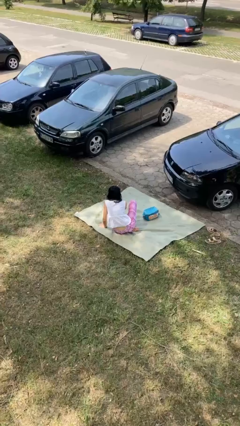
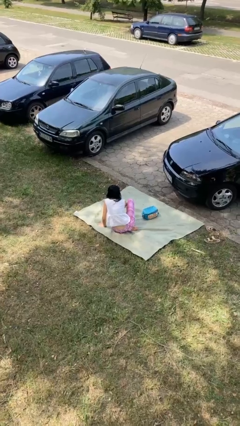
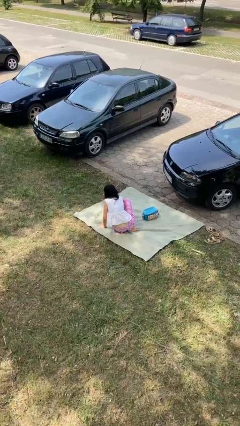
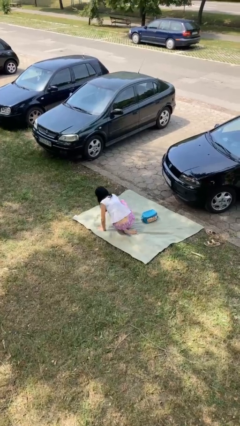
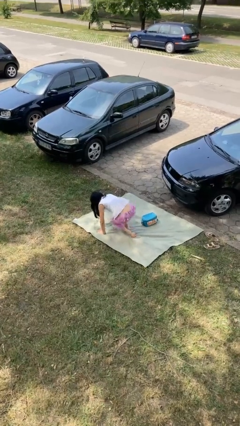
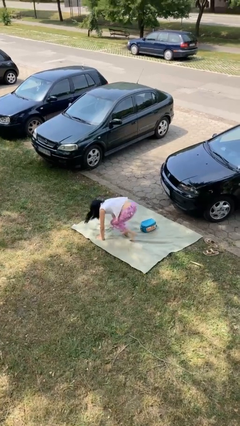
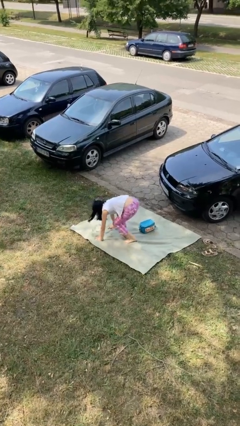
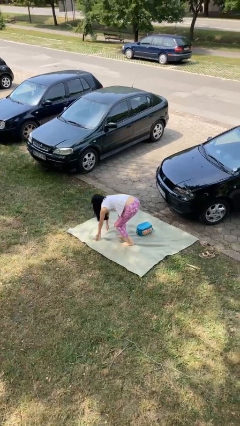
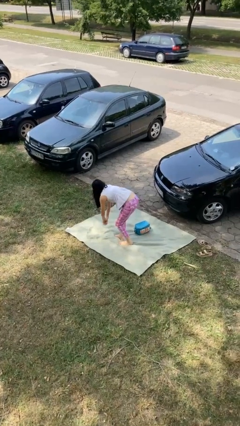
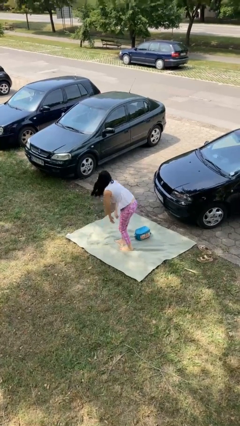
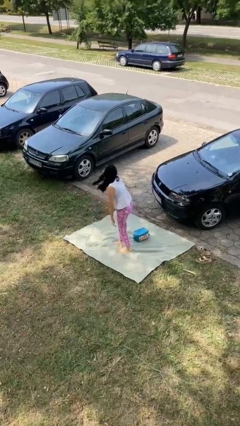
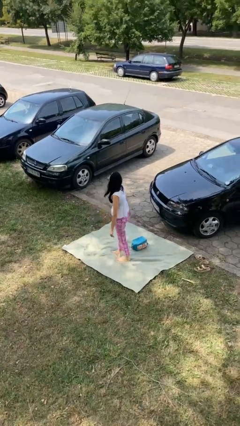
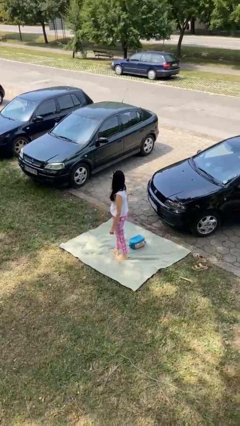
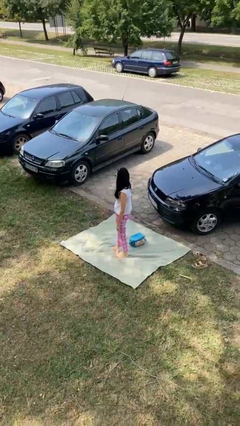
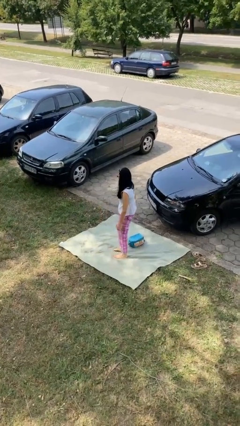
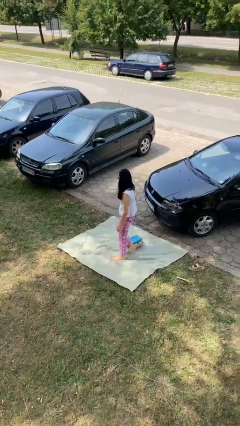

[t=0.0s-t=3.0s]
person stands up from floor

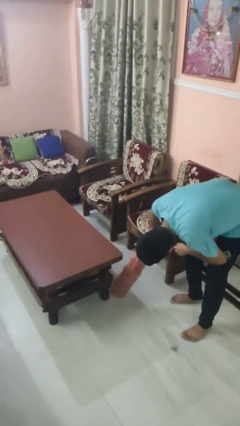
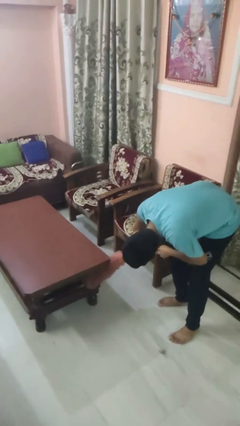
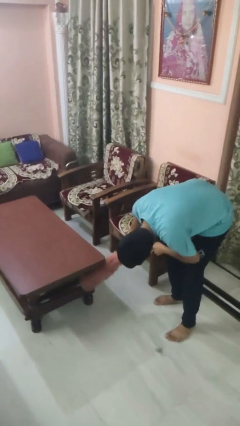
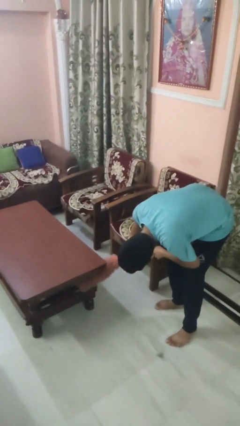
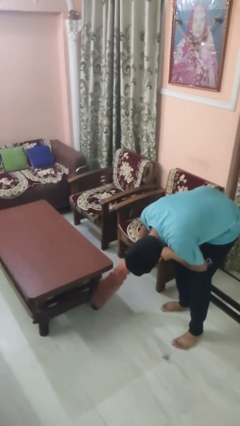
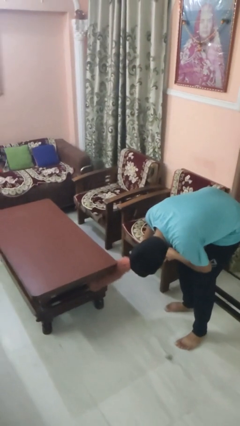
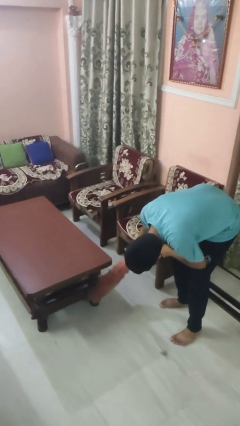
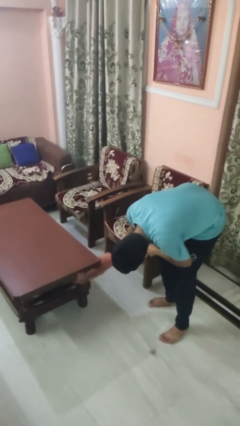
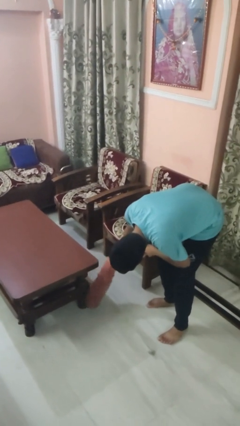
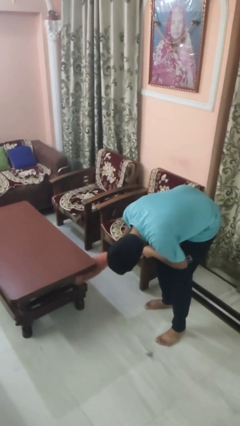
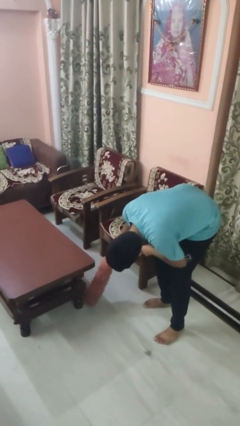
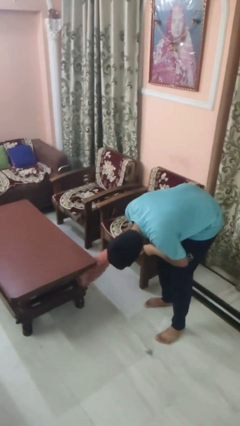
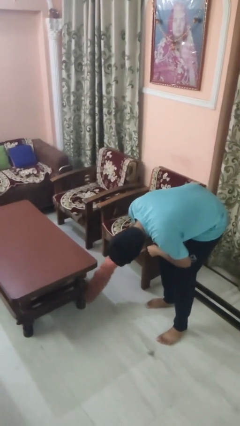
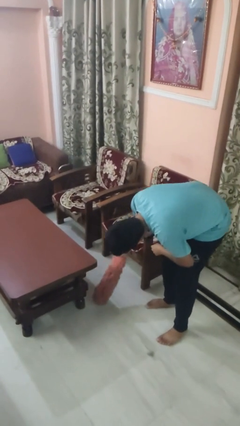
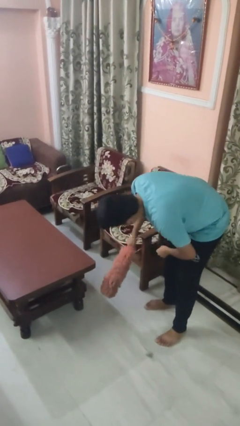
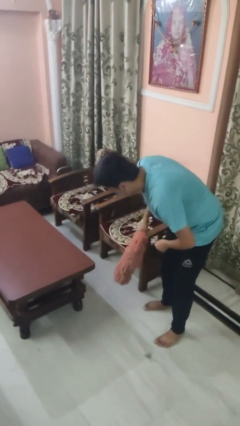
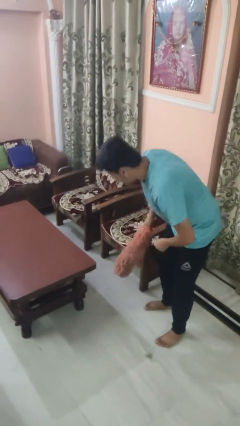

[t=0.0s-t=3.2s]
person dusts furniture

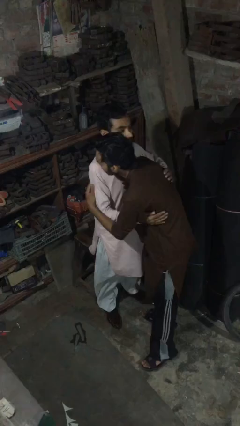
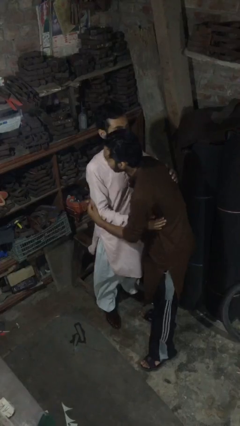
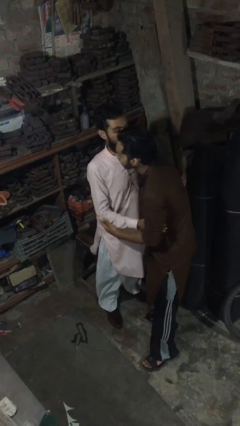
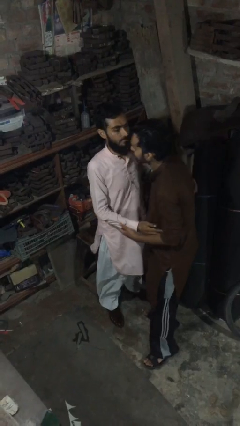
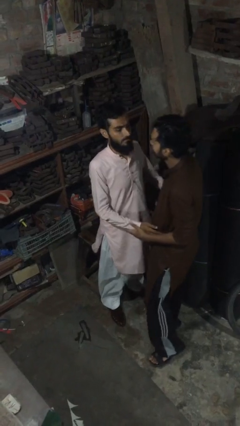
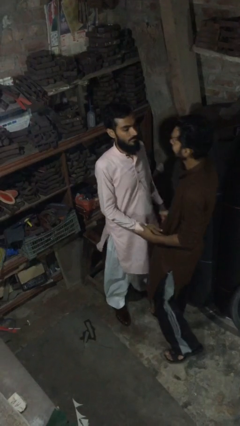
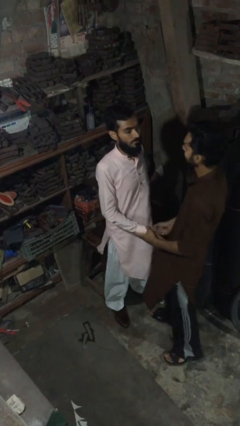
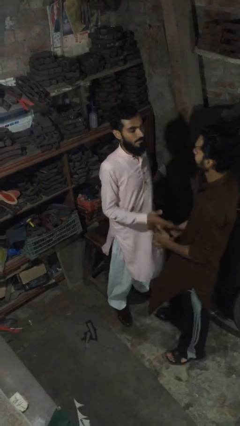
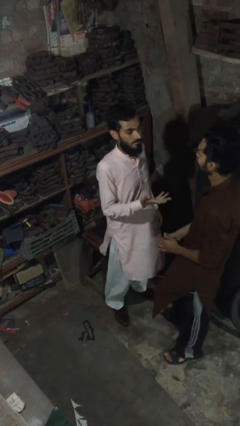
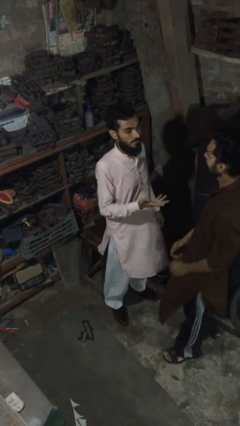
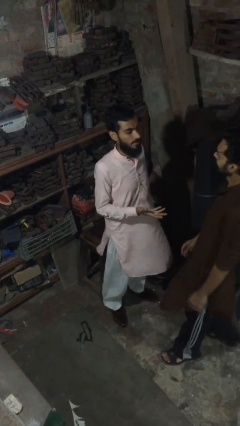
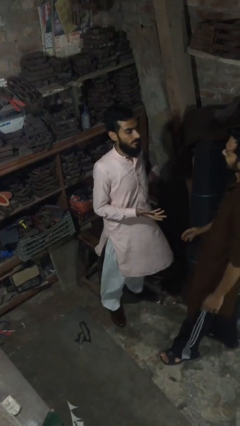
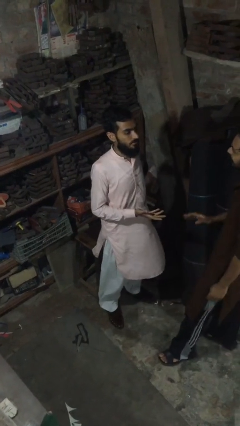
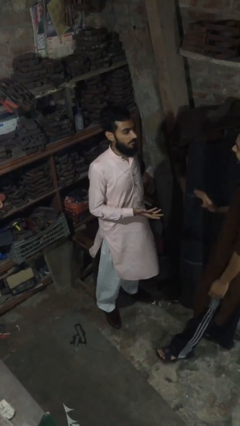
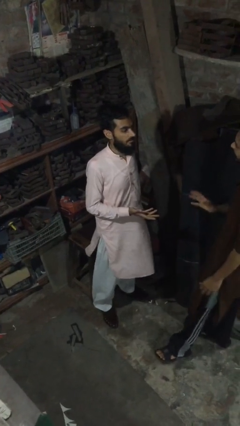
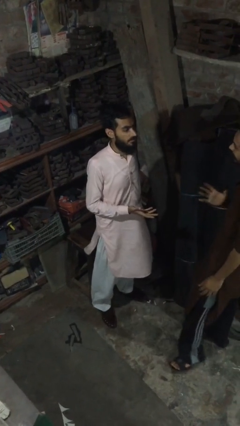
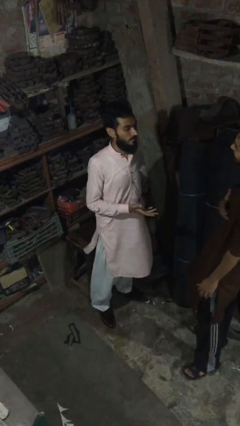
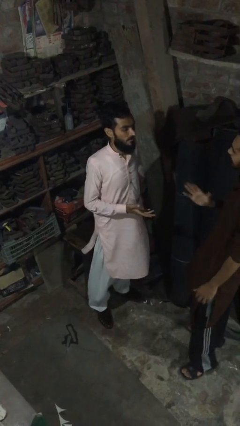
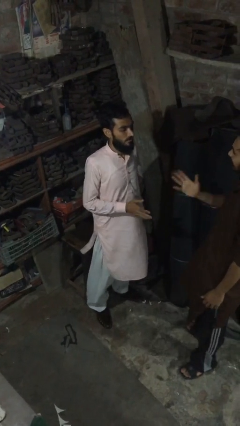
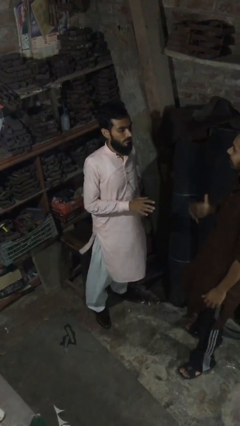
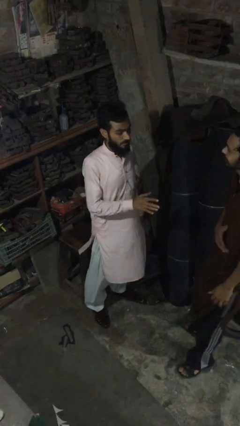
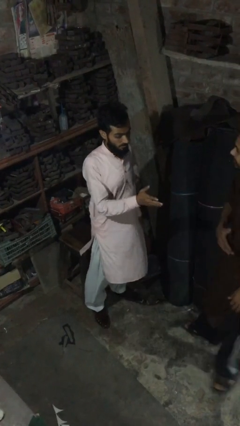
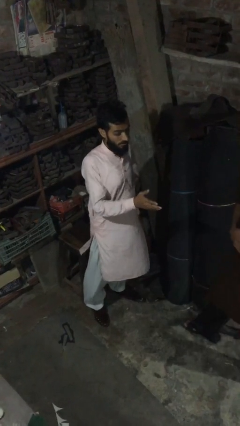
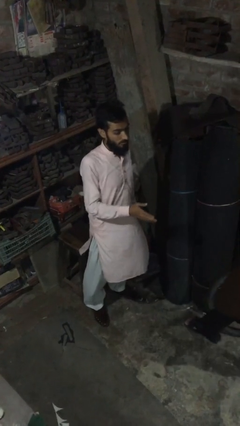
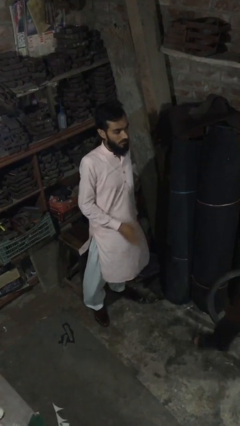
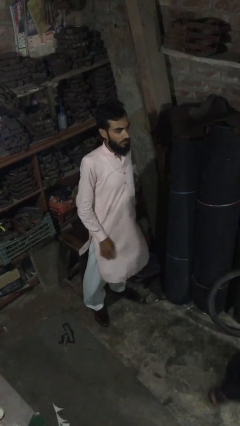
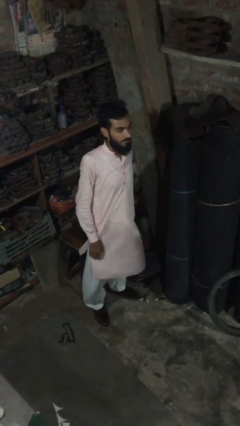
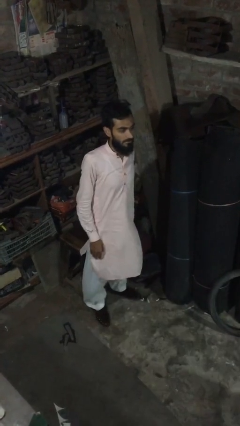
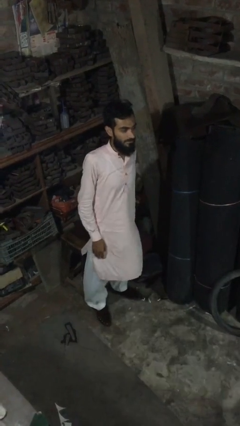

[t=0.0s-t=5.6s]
person talks to person

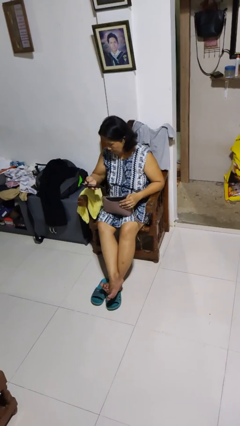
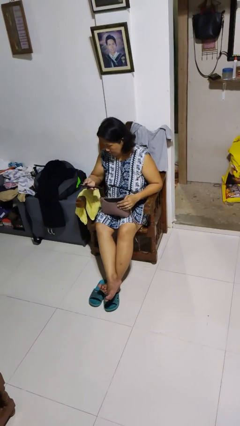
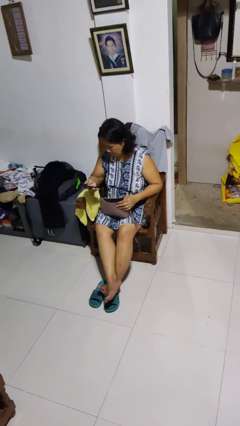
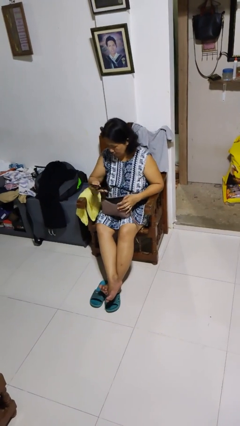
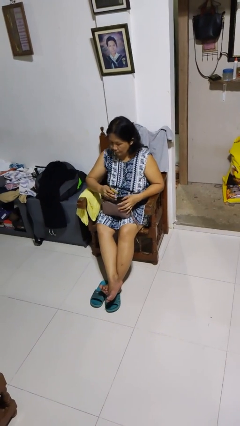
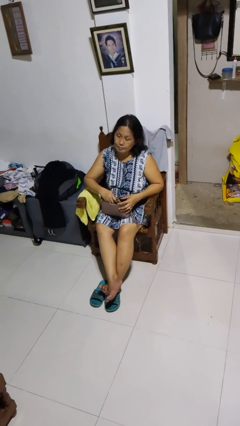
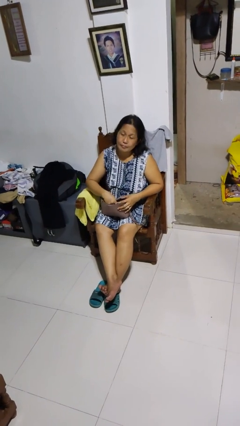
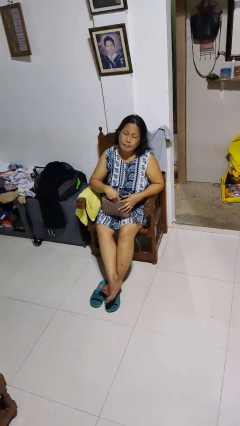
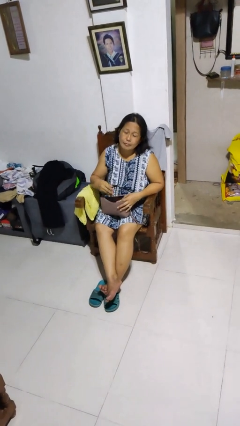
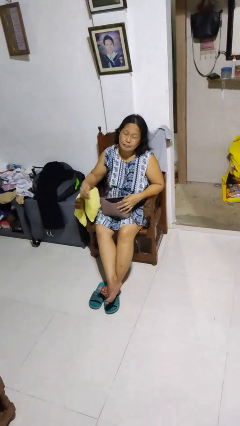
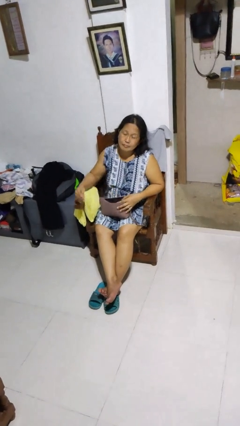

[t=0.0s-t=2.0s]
person puts object into purse

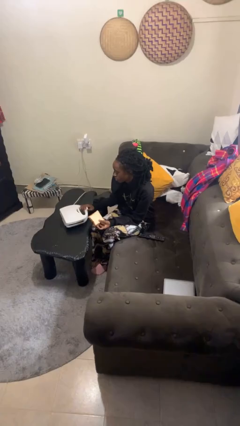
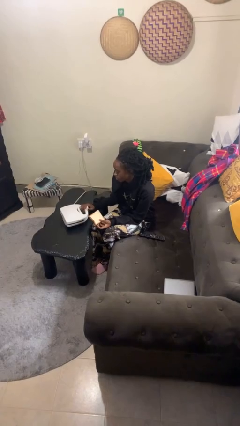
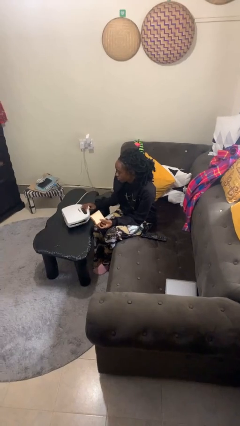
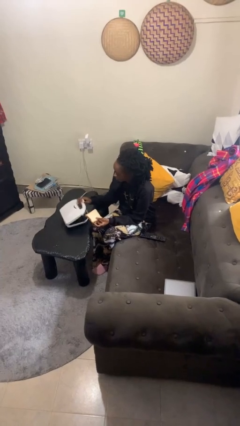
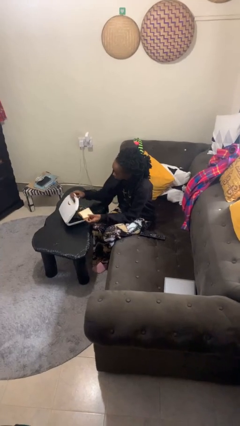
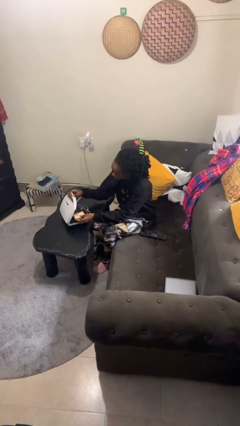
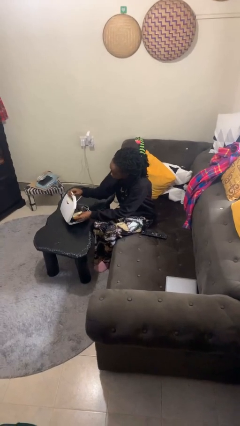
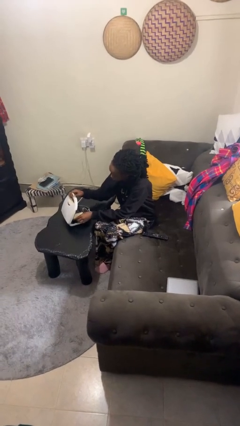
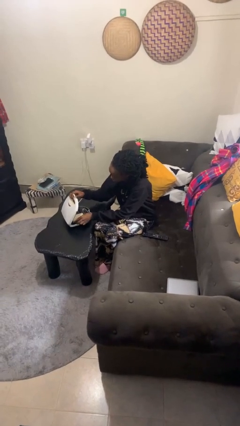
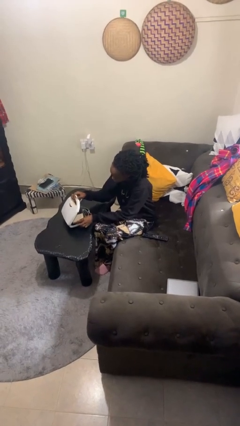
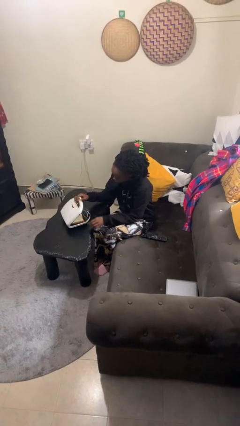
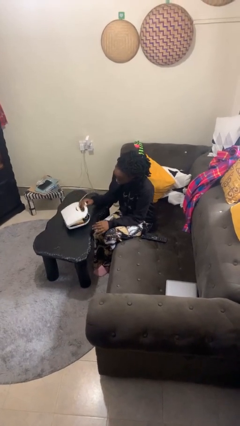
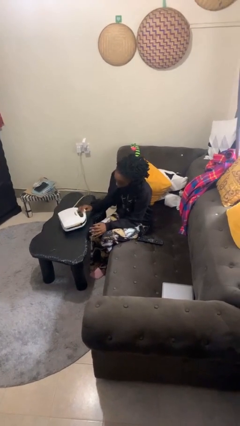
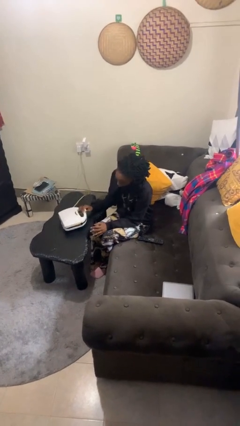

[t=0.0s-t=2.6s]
person puts object into toaster

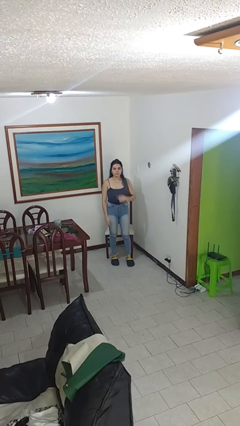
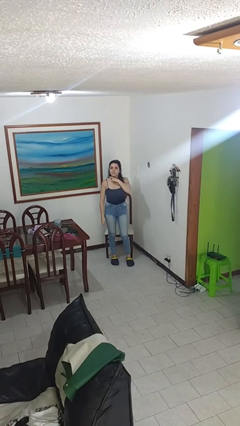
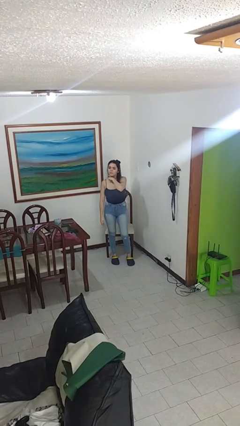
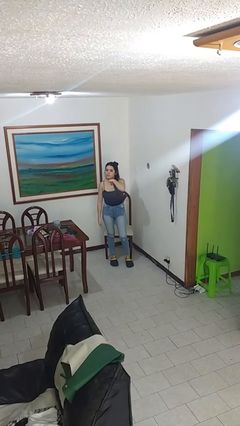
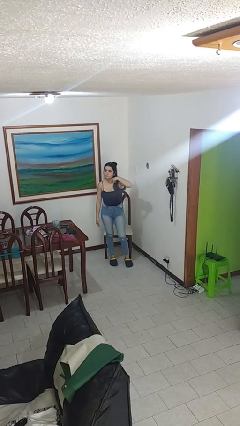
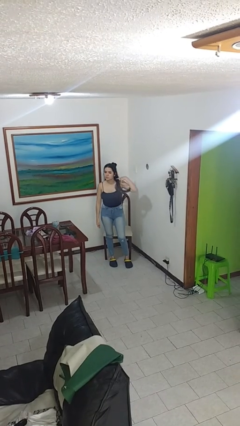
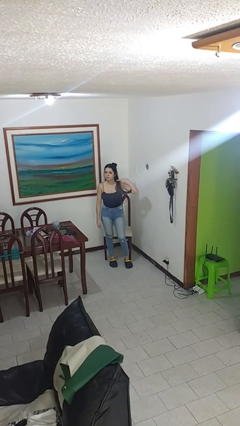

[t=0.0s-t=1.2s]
person gestures cut

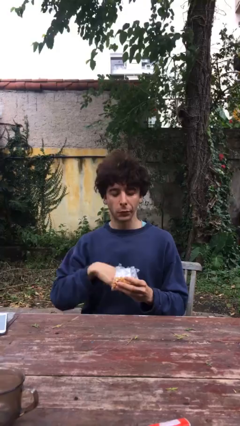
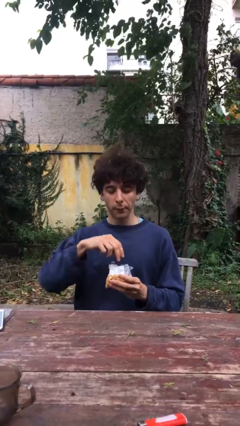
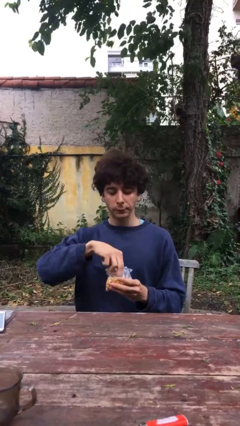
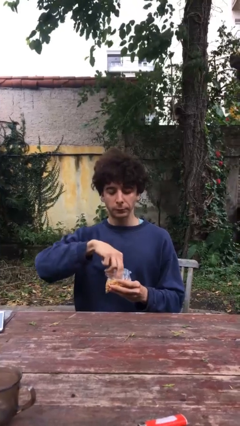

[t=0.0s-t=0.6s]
person eats snack from bag
